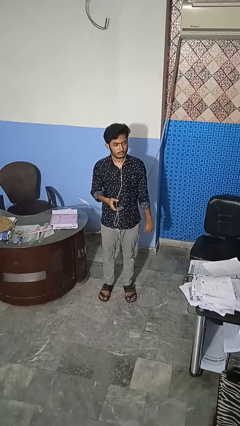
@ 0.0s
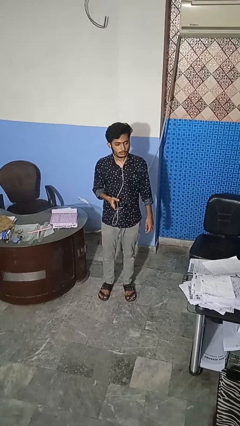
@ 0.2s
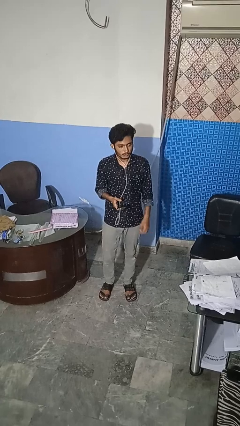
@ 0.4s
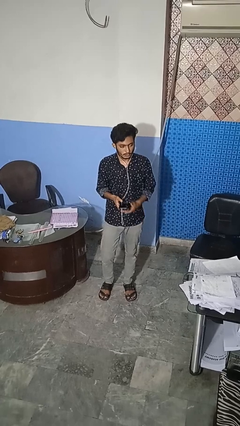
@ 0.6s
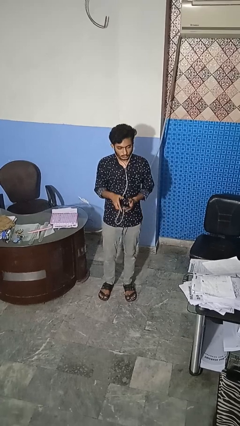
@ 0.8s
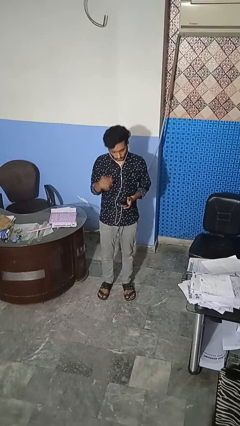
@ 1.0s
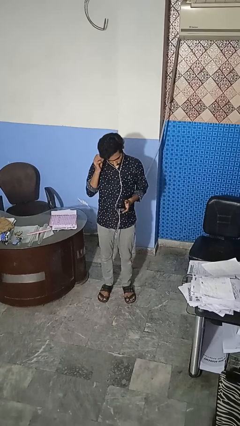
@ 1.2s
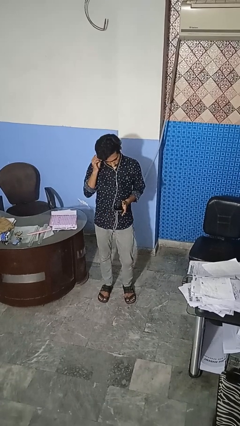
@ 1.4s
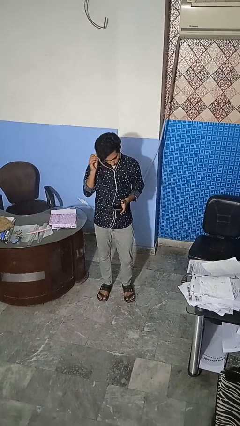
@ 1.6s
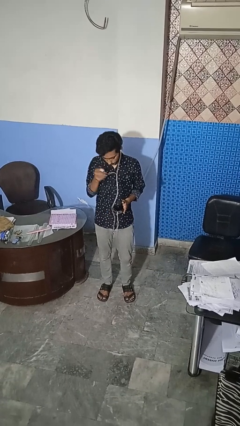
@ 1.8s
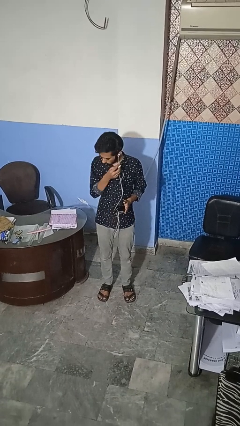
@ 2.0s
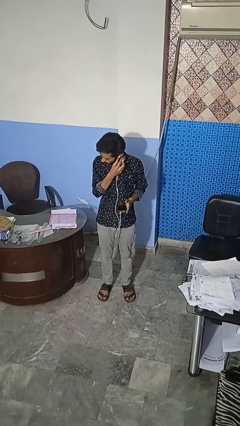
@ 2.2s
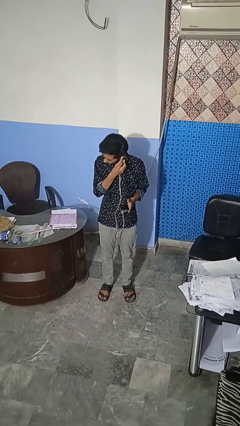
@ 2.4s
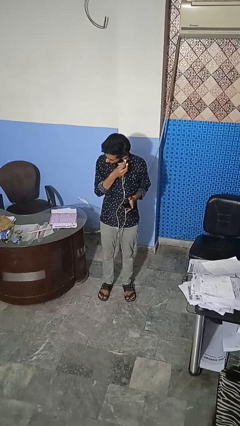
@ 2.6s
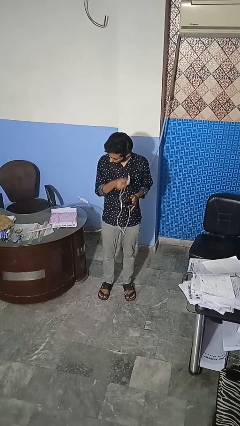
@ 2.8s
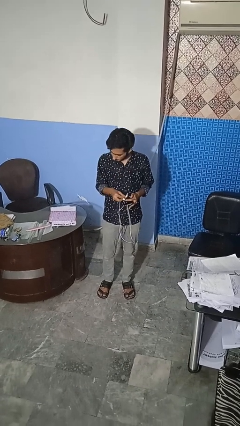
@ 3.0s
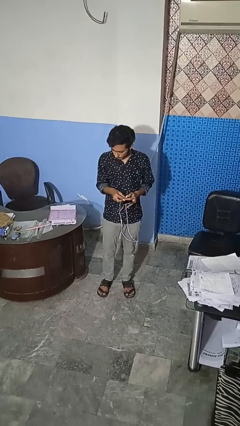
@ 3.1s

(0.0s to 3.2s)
person takes off headphones

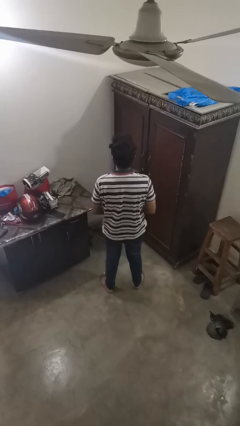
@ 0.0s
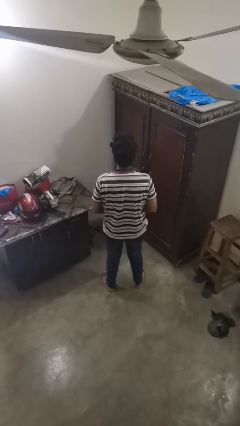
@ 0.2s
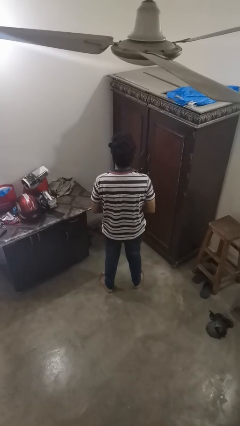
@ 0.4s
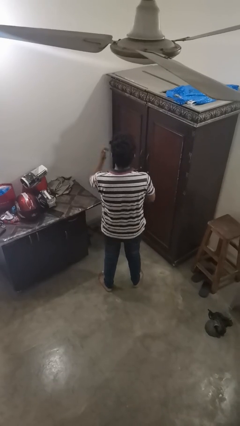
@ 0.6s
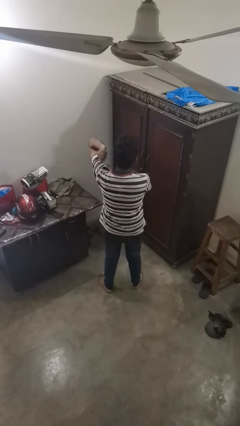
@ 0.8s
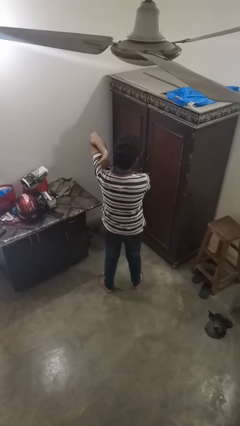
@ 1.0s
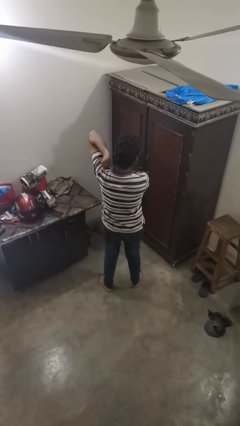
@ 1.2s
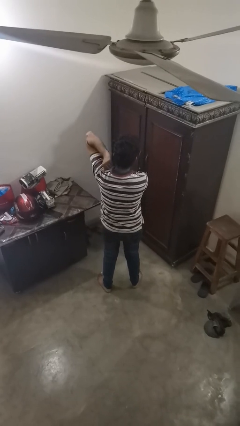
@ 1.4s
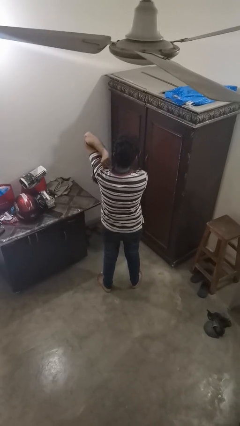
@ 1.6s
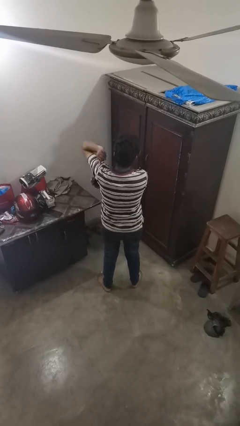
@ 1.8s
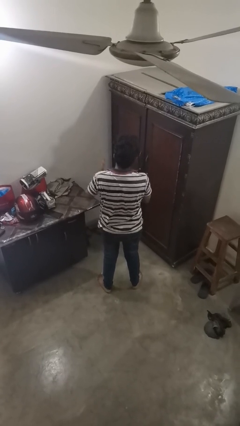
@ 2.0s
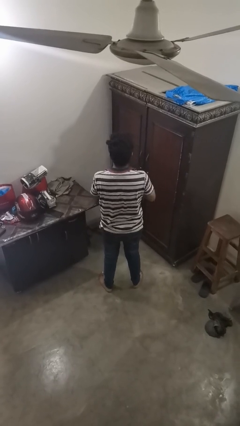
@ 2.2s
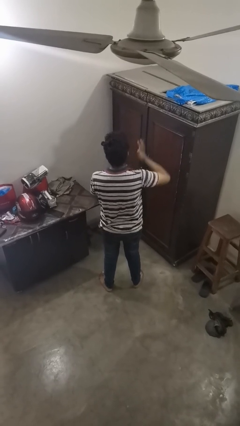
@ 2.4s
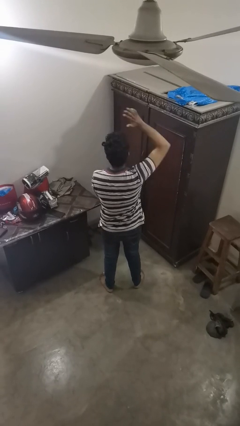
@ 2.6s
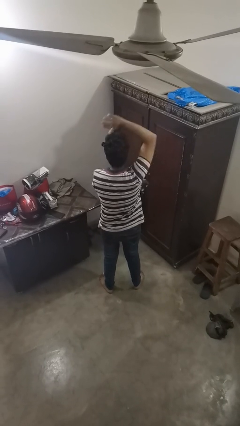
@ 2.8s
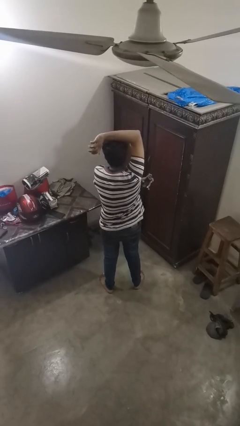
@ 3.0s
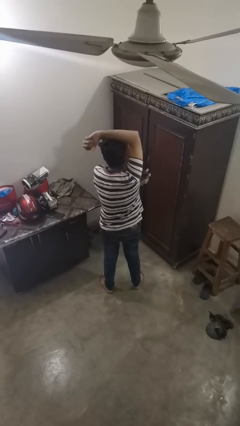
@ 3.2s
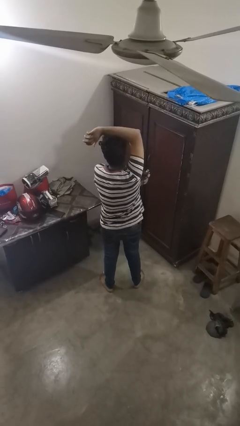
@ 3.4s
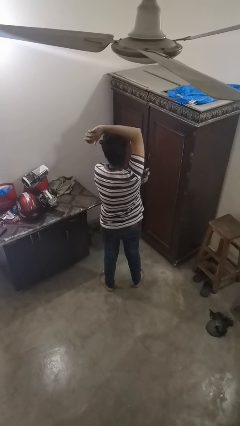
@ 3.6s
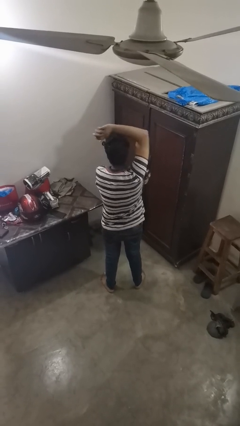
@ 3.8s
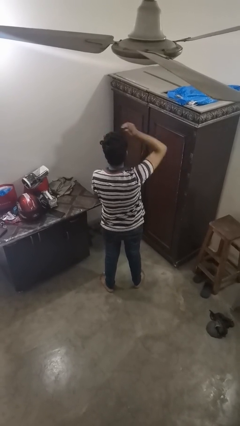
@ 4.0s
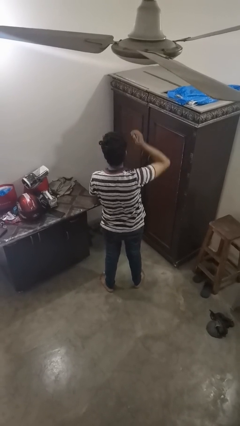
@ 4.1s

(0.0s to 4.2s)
person applies deodorant

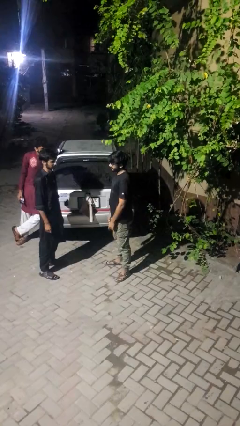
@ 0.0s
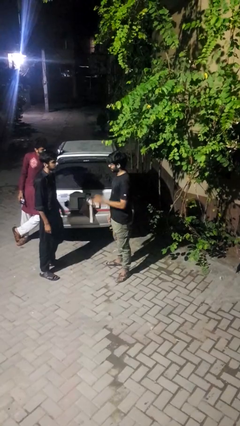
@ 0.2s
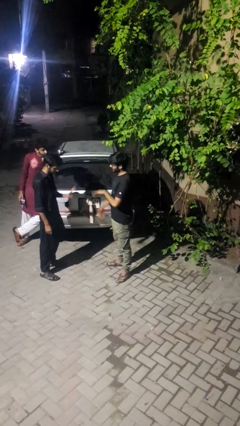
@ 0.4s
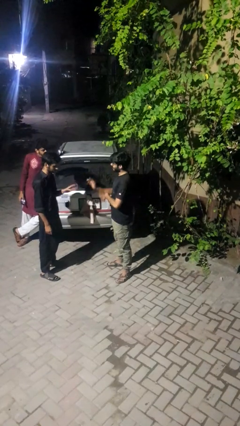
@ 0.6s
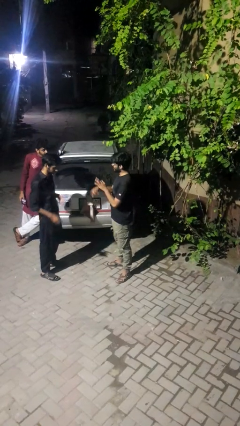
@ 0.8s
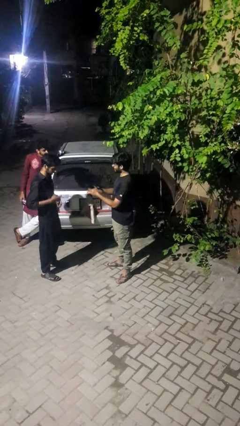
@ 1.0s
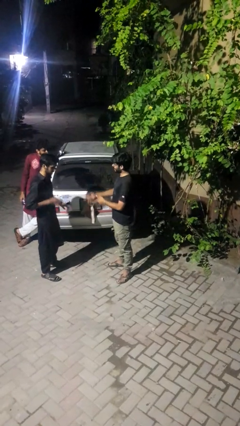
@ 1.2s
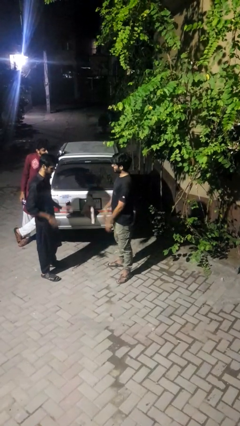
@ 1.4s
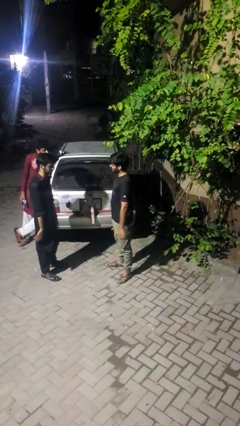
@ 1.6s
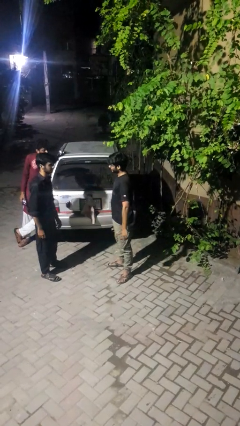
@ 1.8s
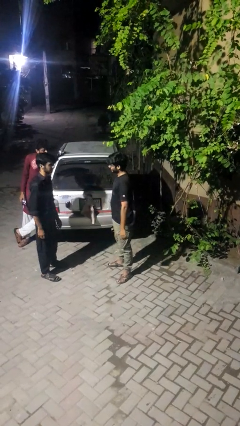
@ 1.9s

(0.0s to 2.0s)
person talks to person

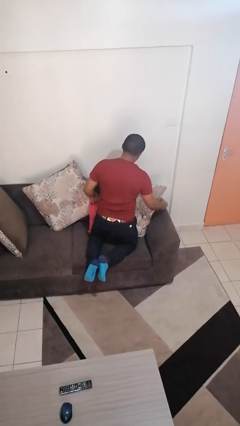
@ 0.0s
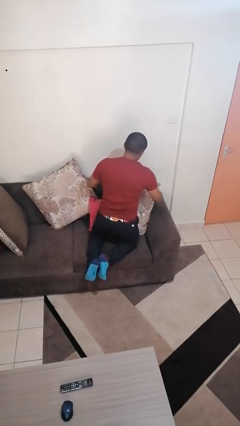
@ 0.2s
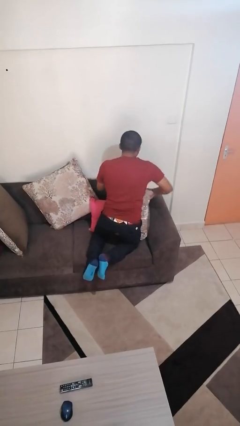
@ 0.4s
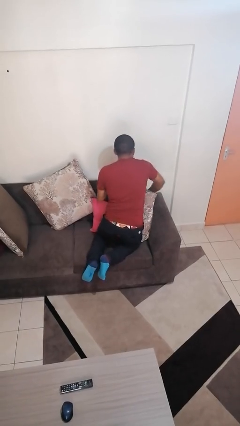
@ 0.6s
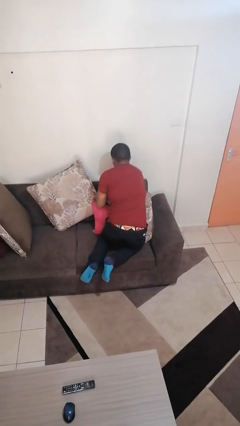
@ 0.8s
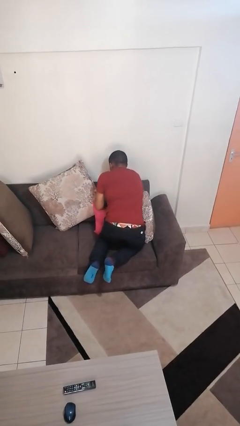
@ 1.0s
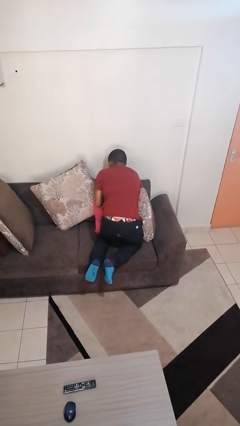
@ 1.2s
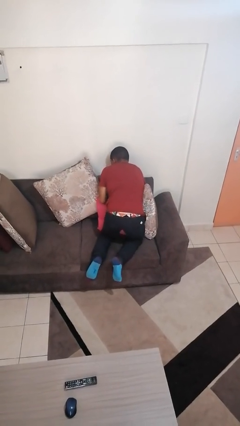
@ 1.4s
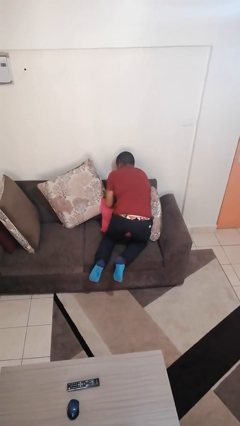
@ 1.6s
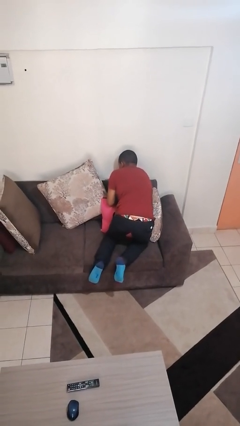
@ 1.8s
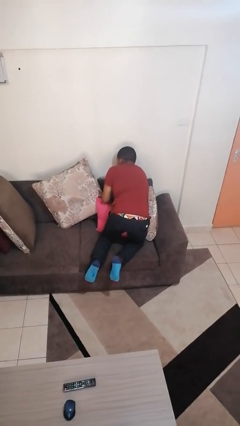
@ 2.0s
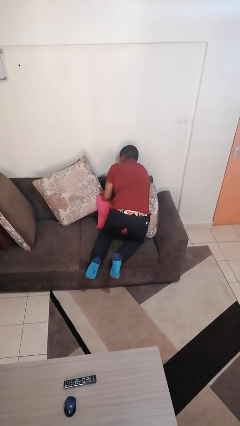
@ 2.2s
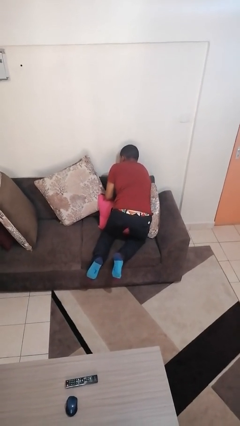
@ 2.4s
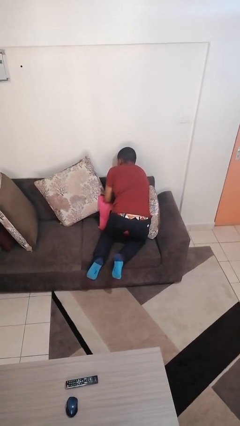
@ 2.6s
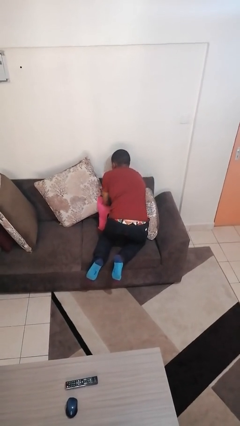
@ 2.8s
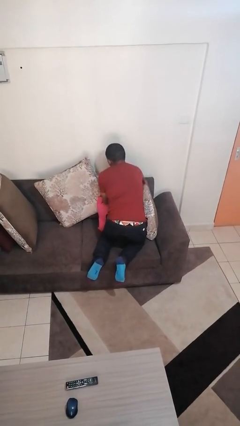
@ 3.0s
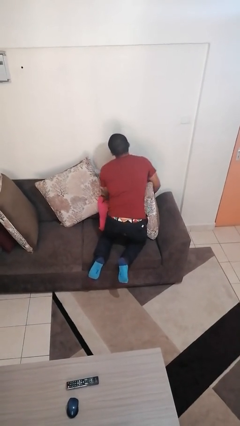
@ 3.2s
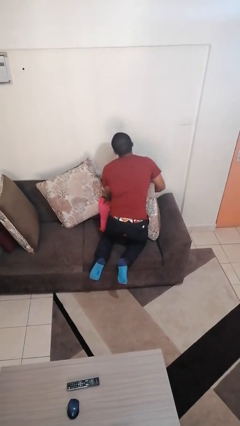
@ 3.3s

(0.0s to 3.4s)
person searches in couch

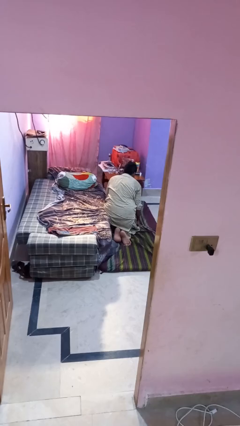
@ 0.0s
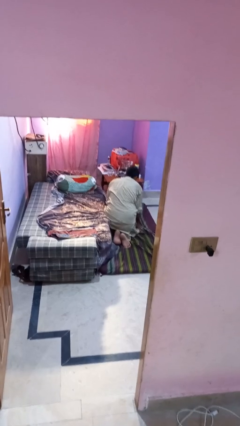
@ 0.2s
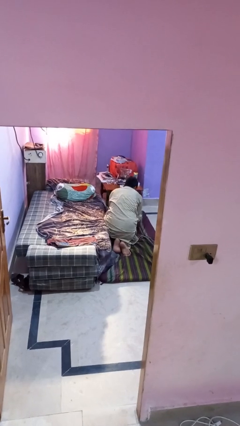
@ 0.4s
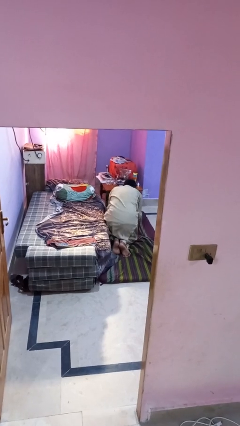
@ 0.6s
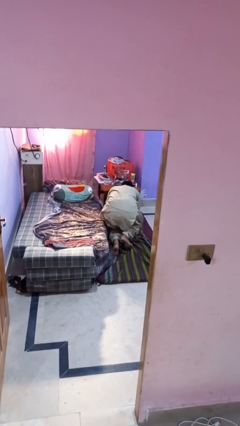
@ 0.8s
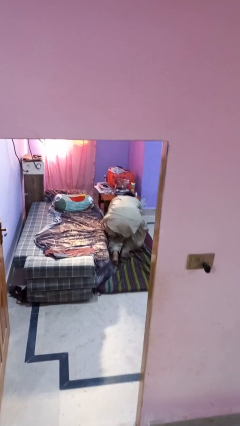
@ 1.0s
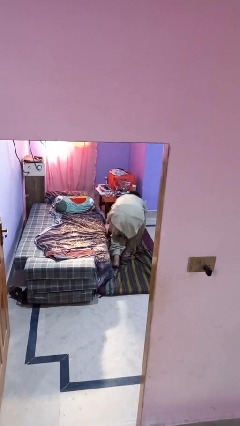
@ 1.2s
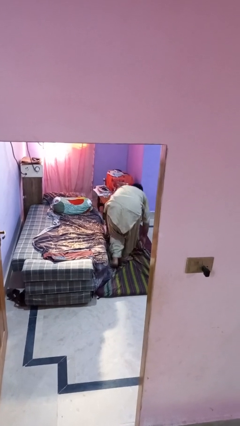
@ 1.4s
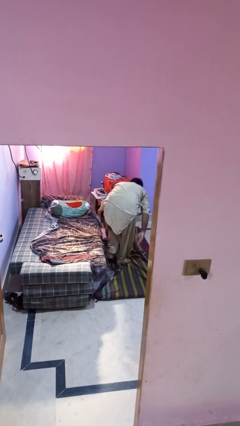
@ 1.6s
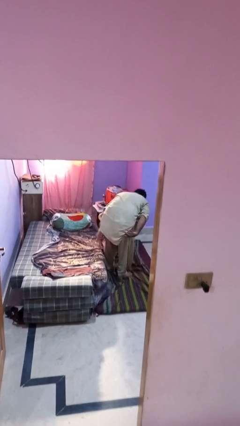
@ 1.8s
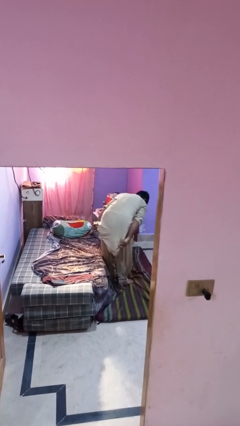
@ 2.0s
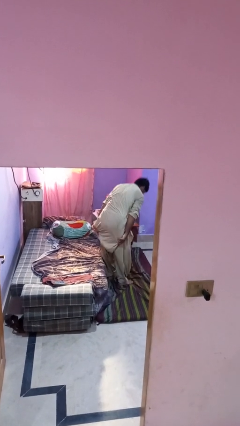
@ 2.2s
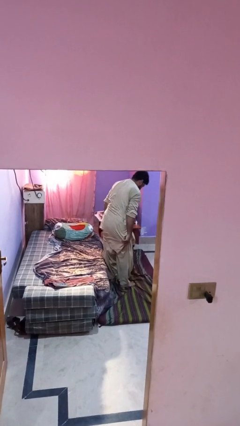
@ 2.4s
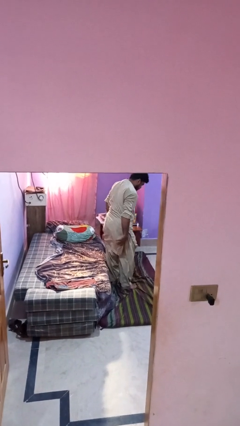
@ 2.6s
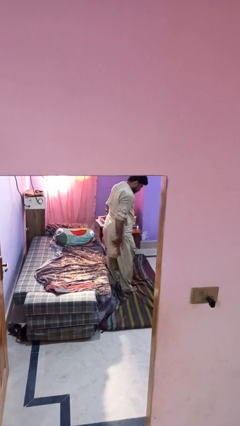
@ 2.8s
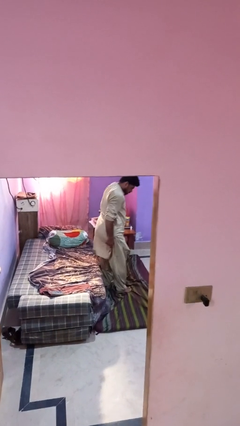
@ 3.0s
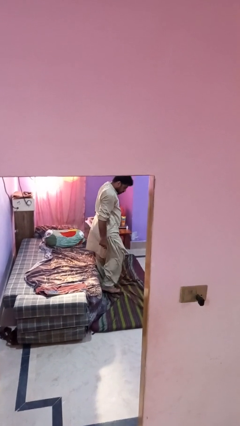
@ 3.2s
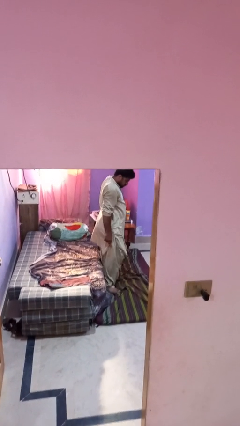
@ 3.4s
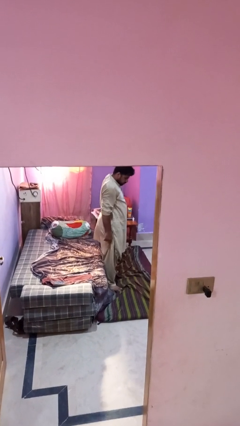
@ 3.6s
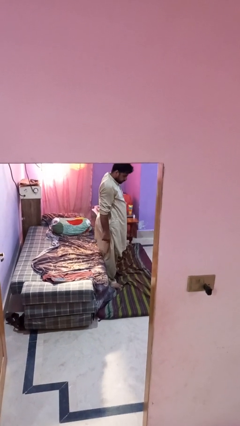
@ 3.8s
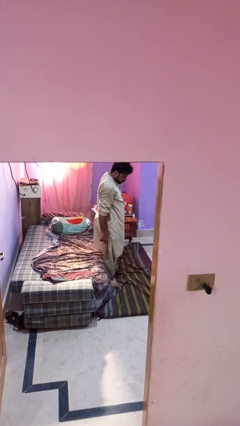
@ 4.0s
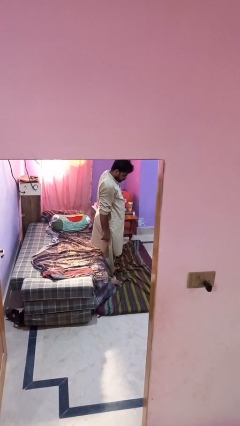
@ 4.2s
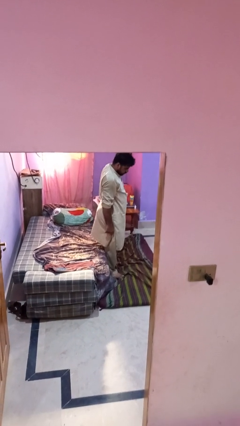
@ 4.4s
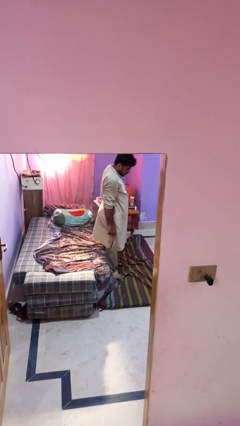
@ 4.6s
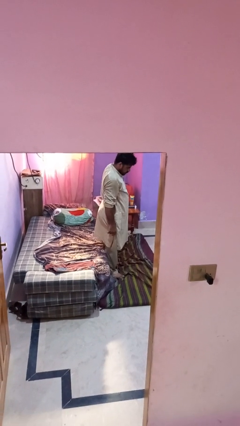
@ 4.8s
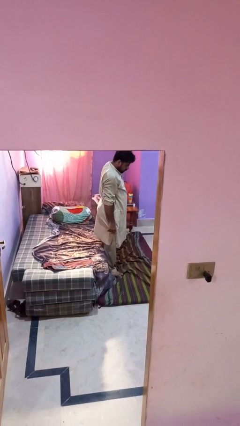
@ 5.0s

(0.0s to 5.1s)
person stands up from floor
